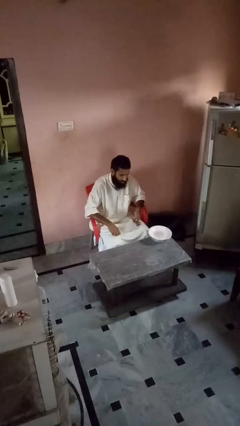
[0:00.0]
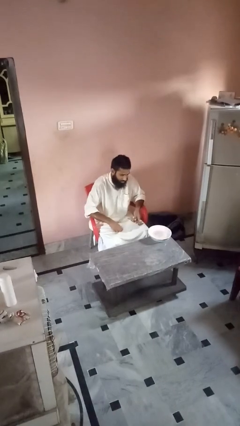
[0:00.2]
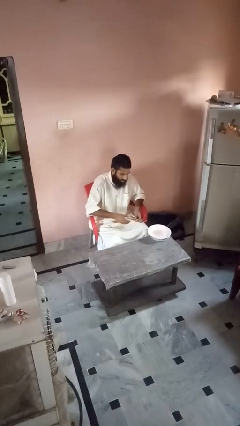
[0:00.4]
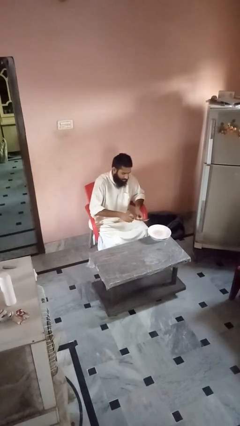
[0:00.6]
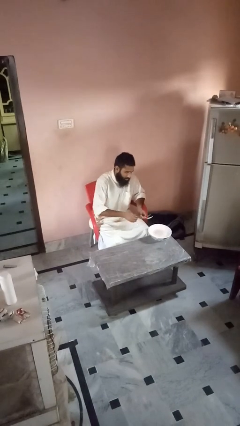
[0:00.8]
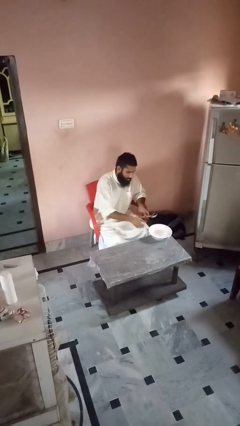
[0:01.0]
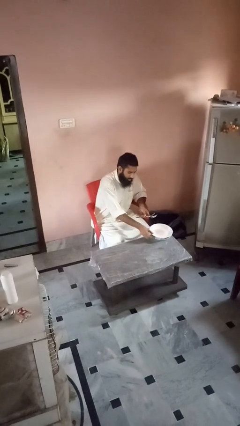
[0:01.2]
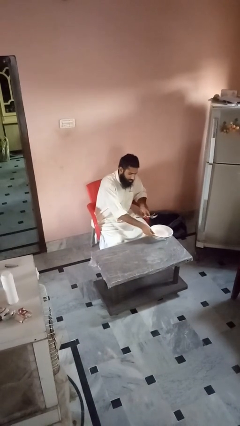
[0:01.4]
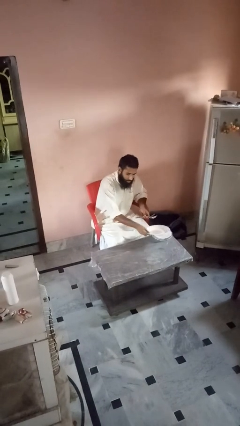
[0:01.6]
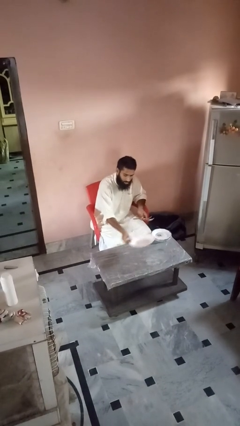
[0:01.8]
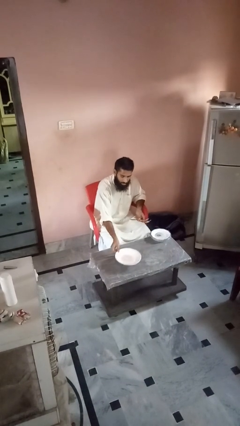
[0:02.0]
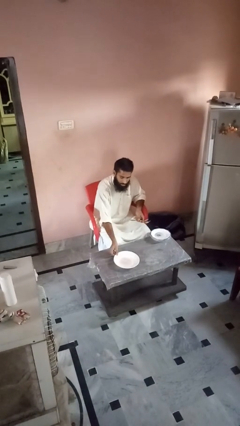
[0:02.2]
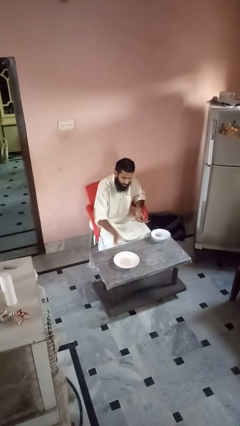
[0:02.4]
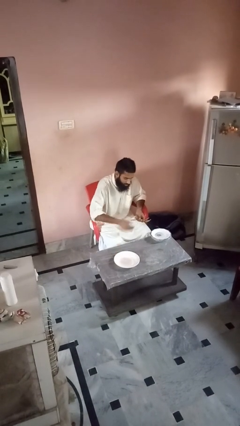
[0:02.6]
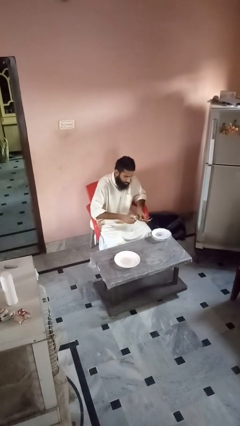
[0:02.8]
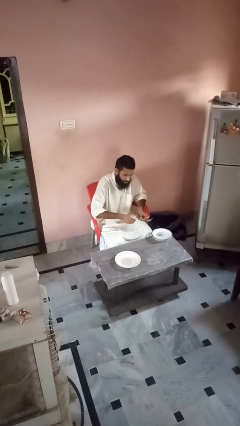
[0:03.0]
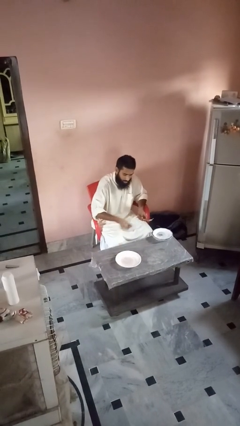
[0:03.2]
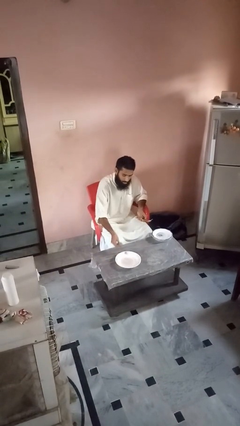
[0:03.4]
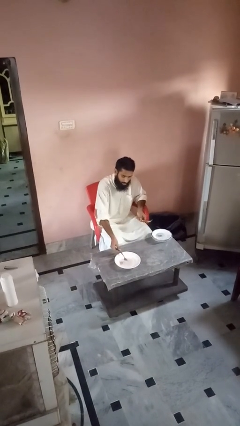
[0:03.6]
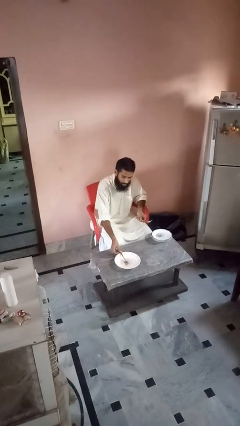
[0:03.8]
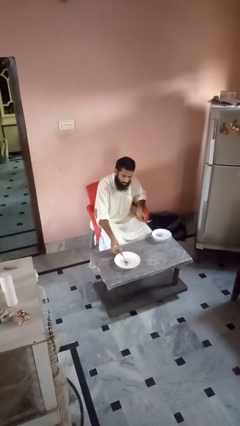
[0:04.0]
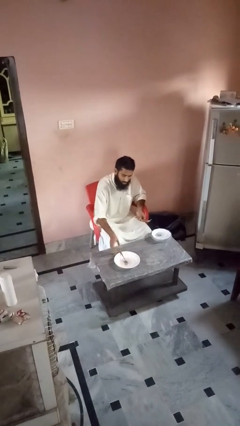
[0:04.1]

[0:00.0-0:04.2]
person sets table

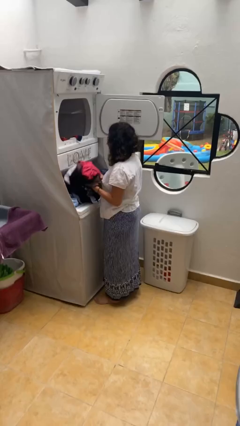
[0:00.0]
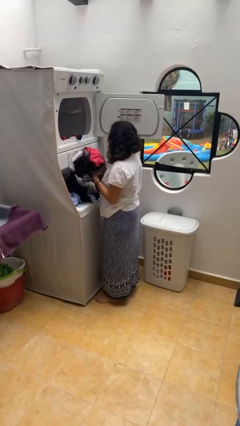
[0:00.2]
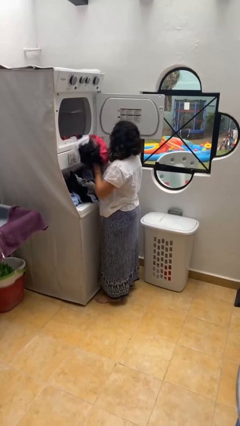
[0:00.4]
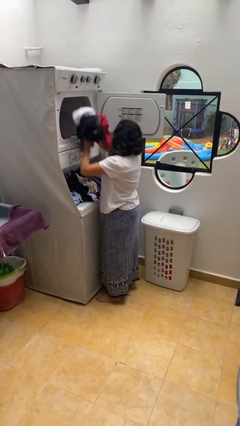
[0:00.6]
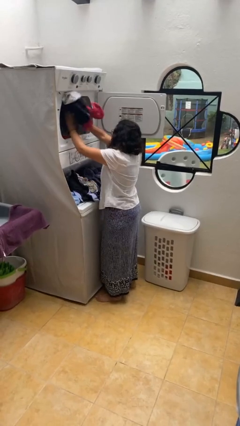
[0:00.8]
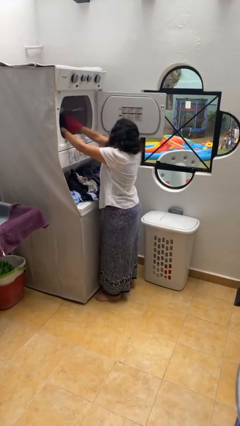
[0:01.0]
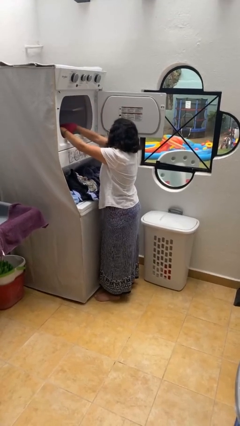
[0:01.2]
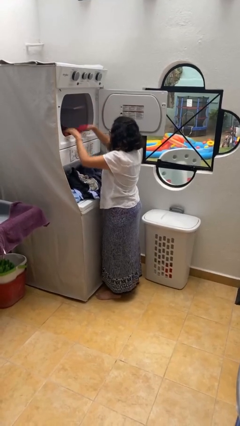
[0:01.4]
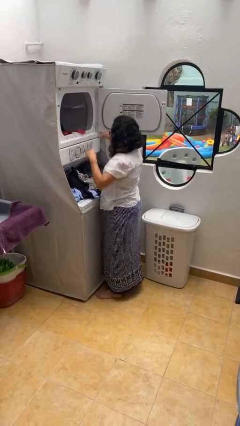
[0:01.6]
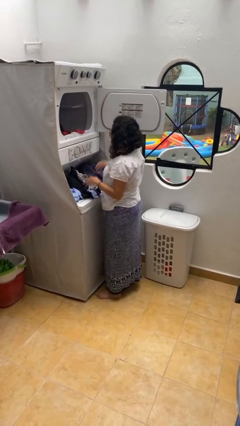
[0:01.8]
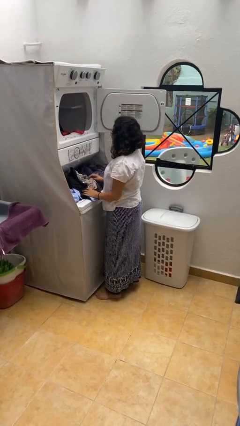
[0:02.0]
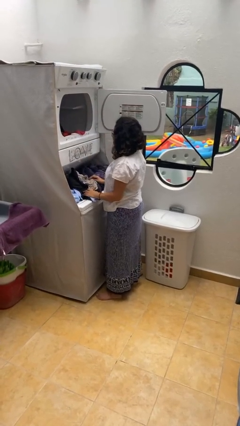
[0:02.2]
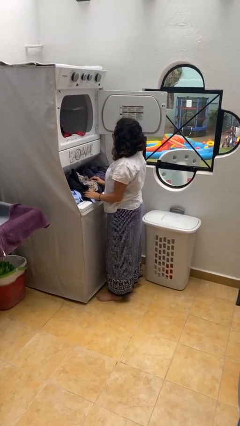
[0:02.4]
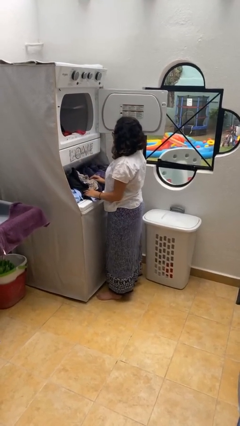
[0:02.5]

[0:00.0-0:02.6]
person loads dryer

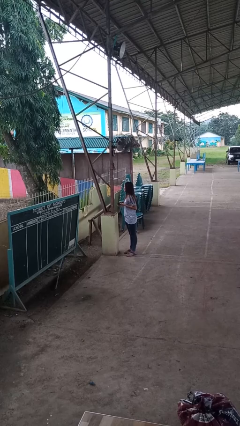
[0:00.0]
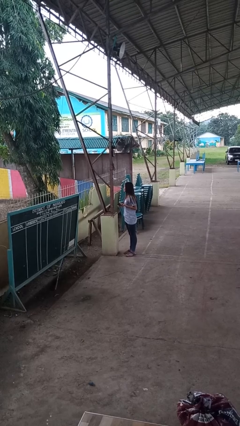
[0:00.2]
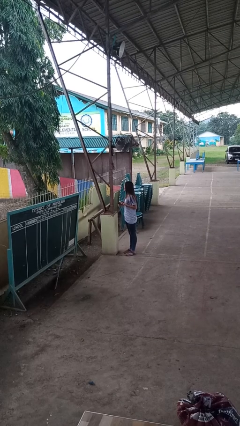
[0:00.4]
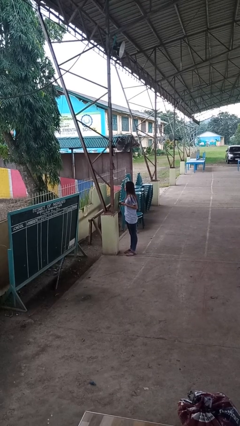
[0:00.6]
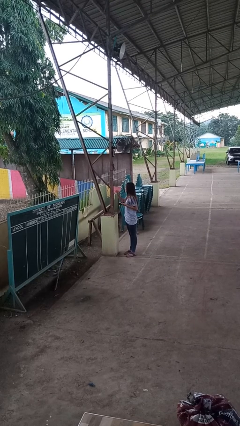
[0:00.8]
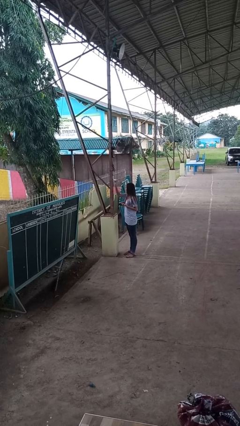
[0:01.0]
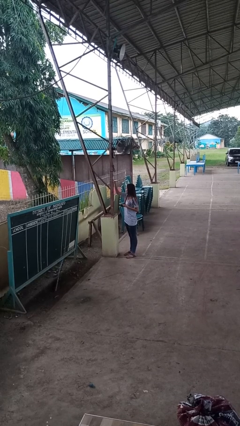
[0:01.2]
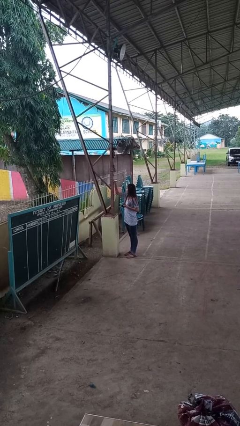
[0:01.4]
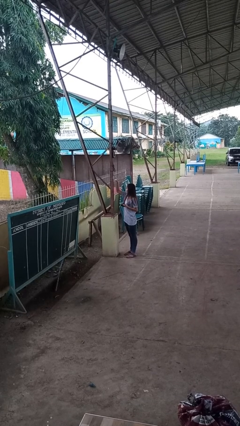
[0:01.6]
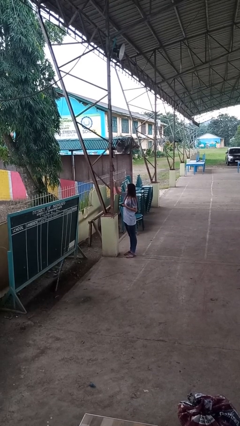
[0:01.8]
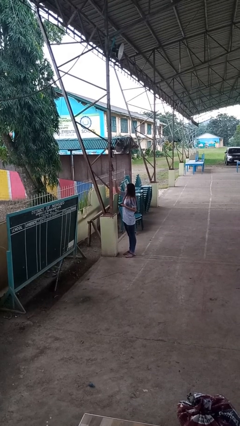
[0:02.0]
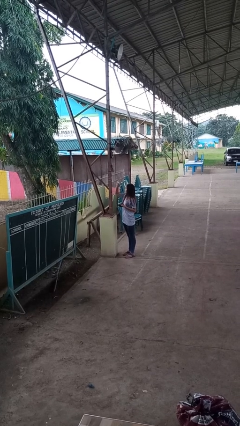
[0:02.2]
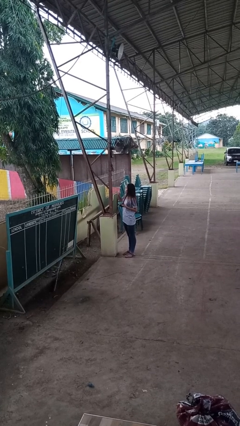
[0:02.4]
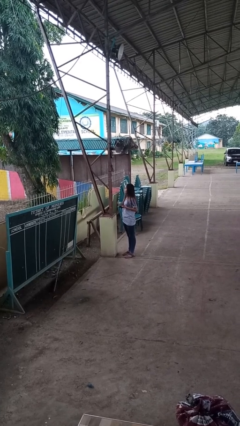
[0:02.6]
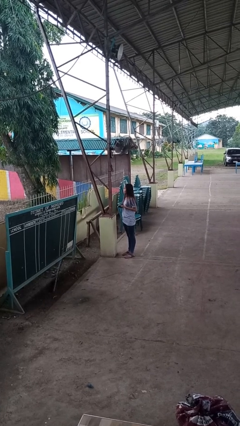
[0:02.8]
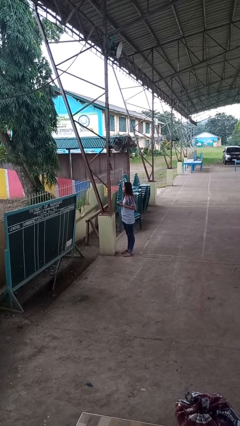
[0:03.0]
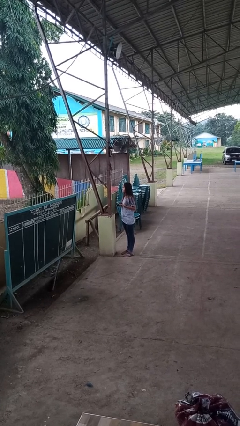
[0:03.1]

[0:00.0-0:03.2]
person unplugs from electrical socket

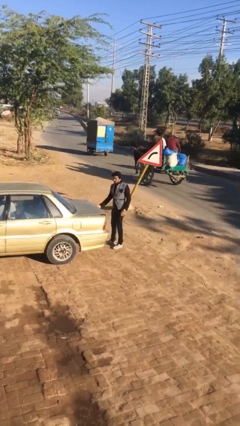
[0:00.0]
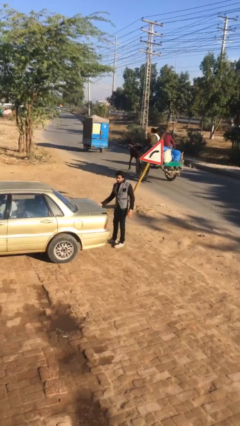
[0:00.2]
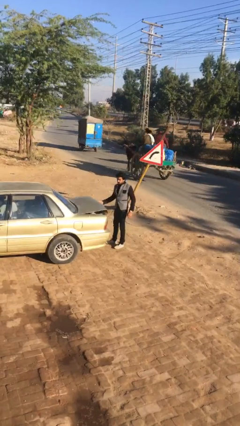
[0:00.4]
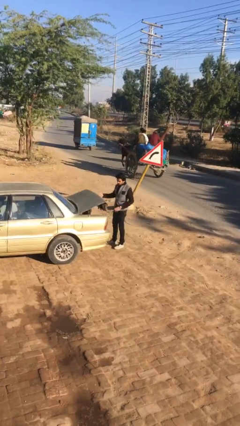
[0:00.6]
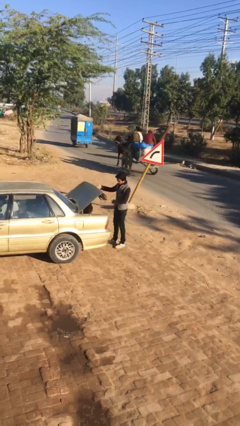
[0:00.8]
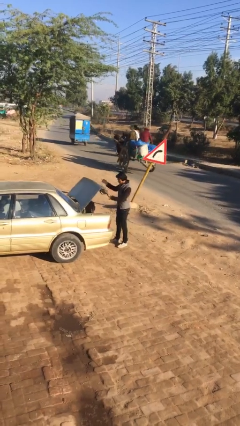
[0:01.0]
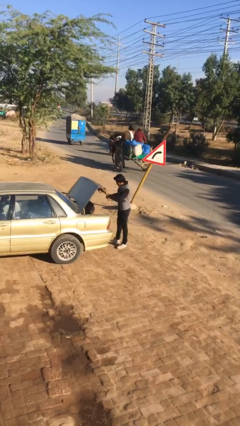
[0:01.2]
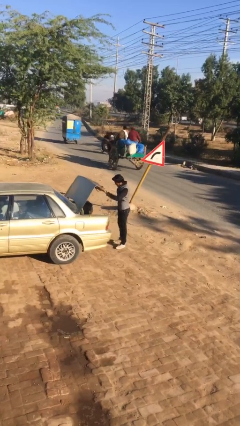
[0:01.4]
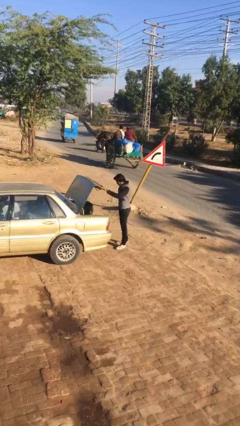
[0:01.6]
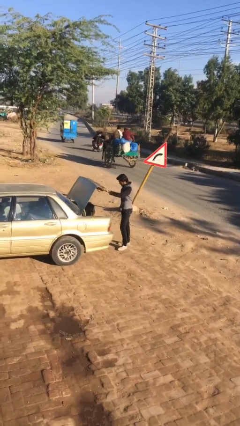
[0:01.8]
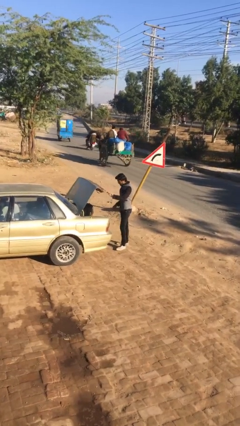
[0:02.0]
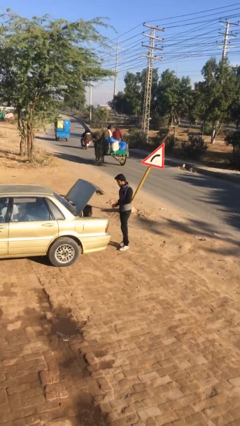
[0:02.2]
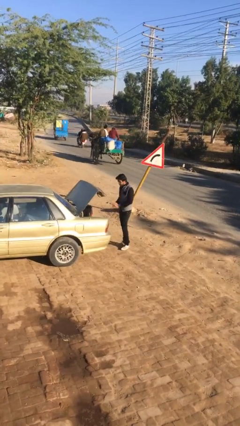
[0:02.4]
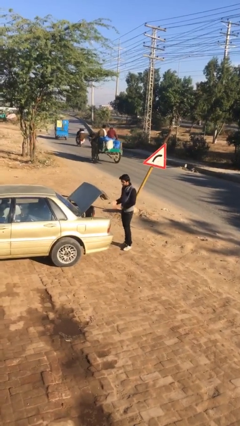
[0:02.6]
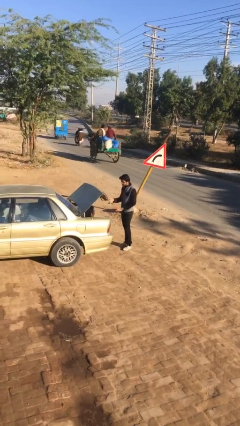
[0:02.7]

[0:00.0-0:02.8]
person opens car trunk

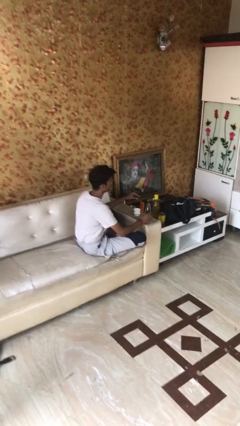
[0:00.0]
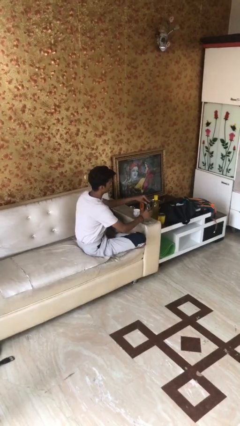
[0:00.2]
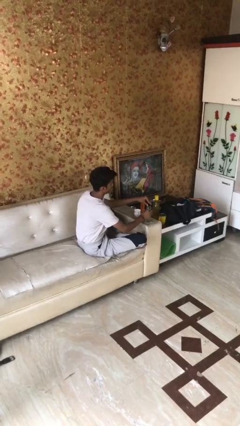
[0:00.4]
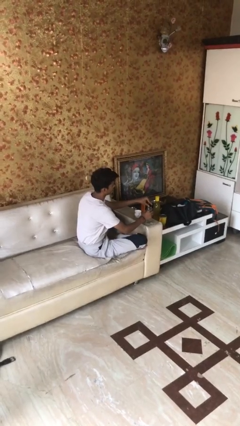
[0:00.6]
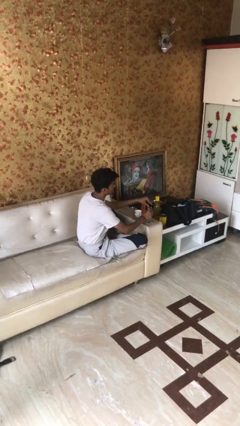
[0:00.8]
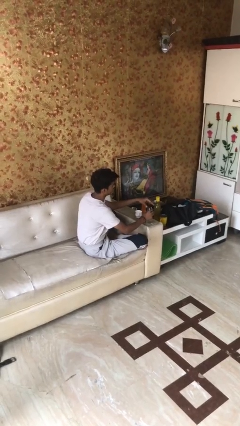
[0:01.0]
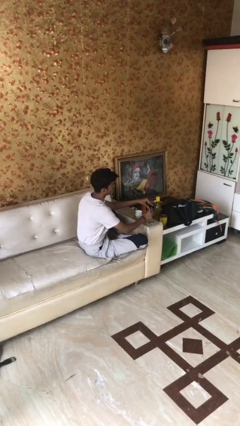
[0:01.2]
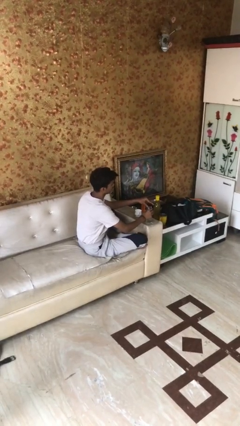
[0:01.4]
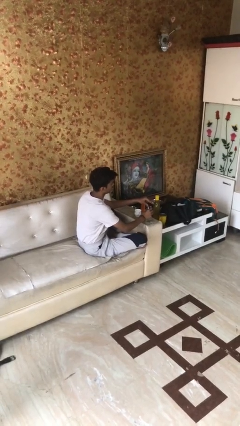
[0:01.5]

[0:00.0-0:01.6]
person screws lid to bottle

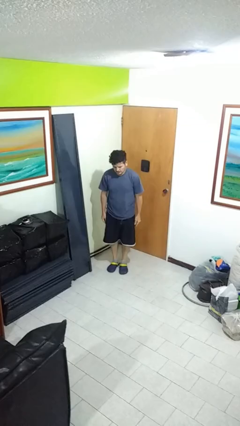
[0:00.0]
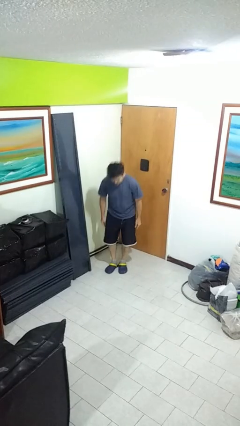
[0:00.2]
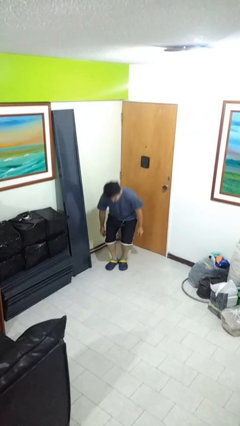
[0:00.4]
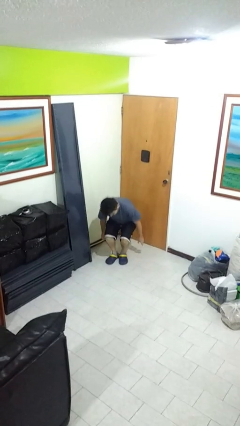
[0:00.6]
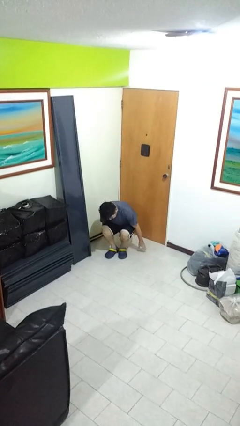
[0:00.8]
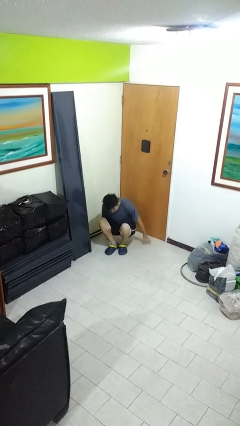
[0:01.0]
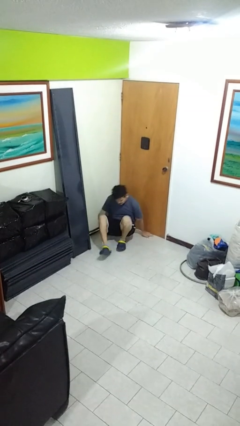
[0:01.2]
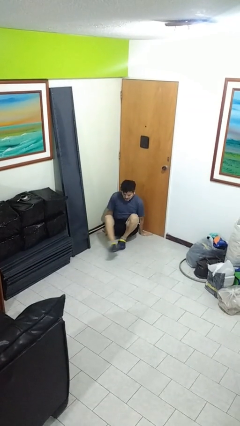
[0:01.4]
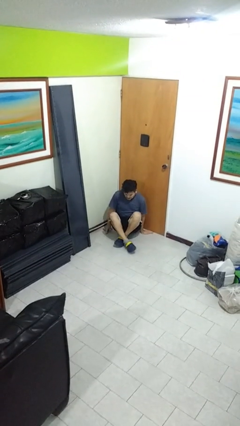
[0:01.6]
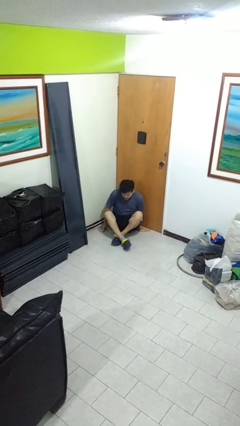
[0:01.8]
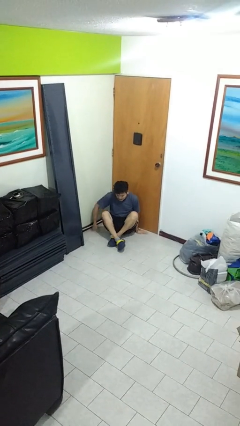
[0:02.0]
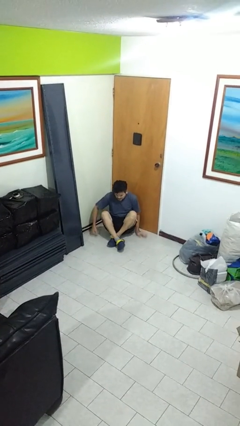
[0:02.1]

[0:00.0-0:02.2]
person sits crisscross

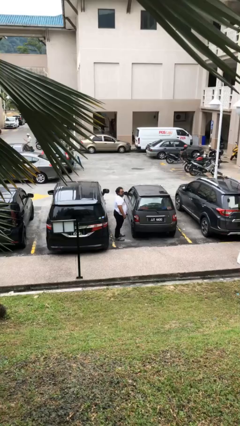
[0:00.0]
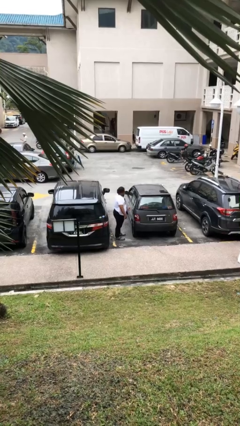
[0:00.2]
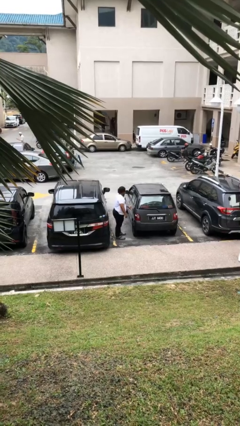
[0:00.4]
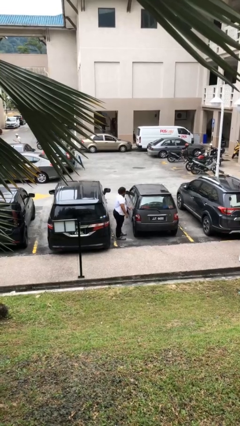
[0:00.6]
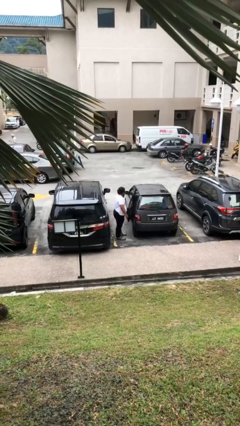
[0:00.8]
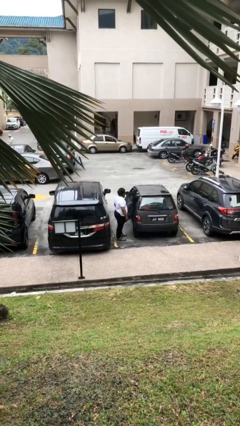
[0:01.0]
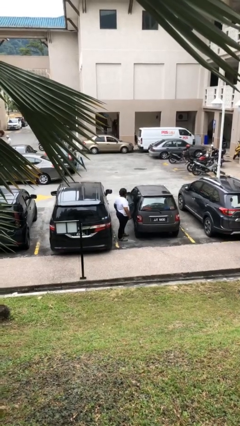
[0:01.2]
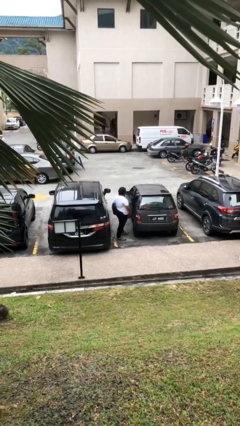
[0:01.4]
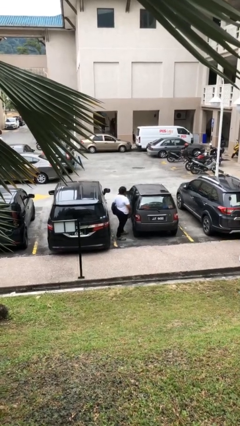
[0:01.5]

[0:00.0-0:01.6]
person opens car door
